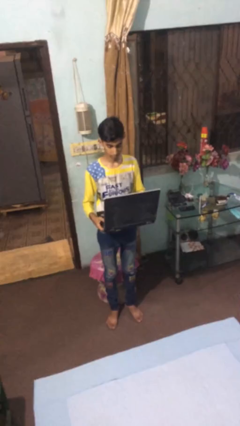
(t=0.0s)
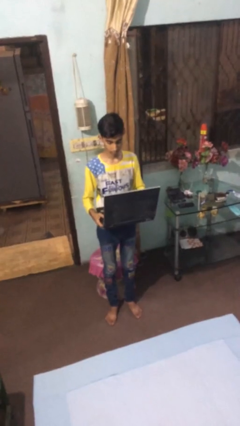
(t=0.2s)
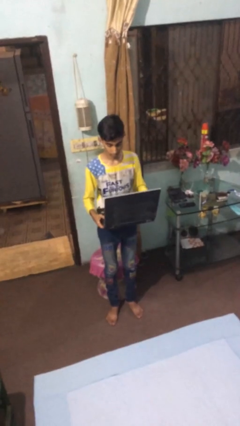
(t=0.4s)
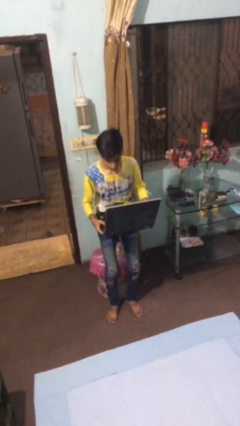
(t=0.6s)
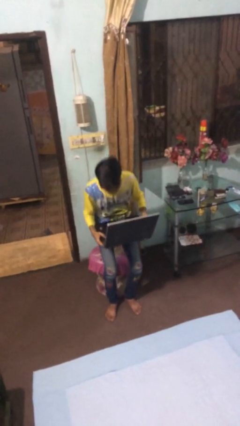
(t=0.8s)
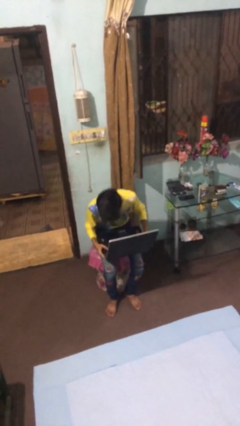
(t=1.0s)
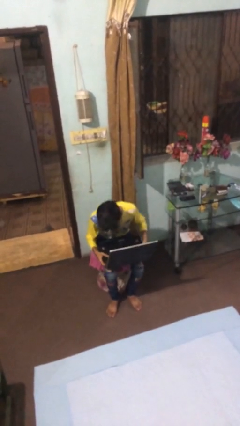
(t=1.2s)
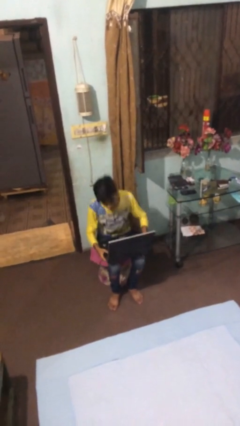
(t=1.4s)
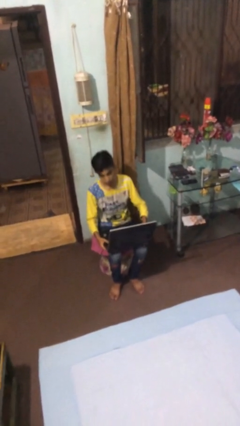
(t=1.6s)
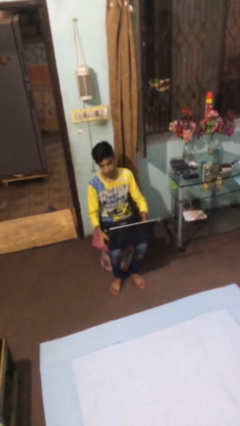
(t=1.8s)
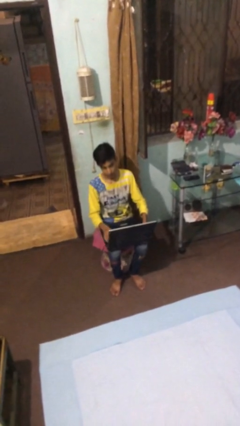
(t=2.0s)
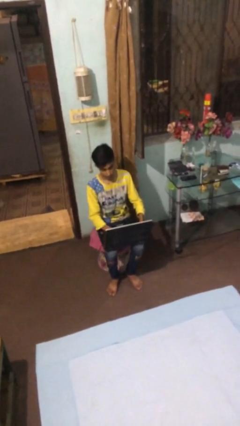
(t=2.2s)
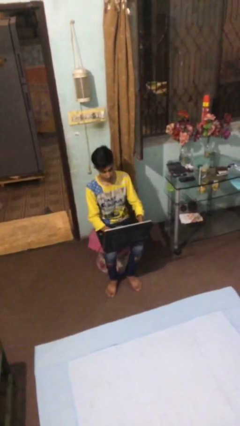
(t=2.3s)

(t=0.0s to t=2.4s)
person sits down

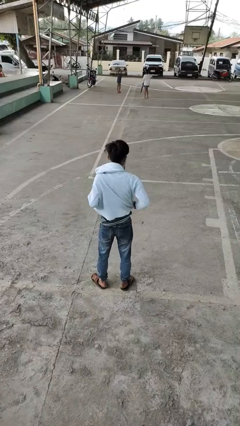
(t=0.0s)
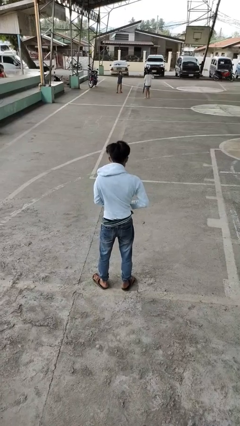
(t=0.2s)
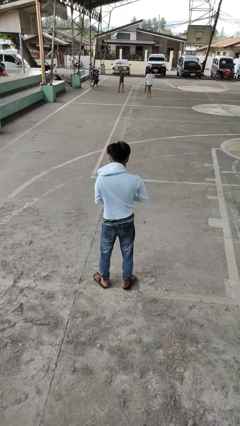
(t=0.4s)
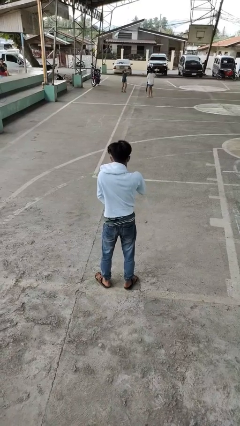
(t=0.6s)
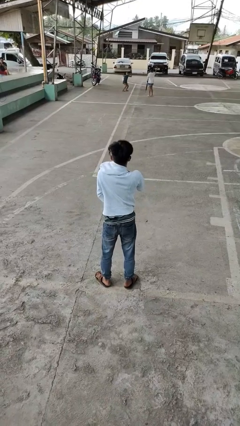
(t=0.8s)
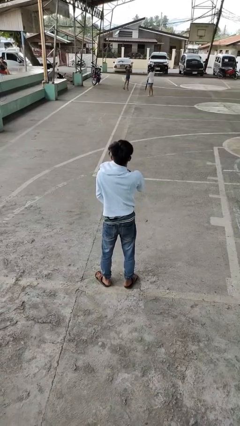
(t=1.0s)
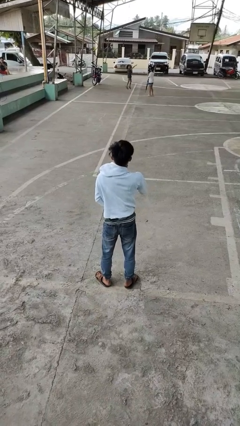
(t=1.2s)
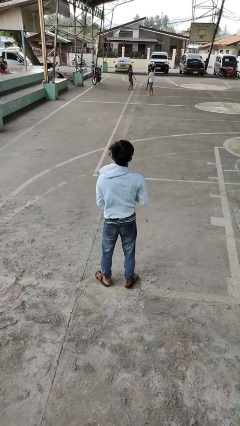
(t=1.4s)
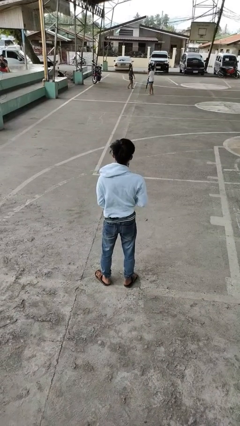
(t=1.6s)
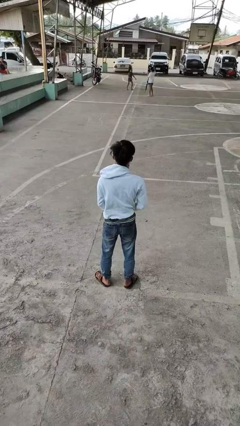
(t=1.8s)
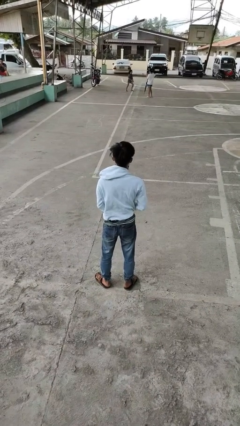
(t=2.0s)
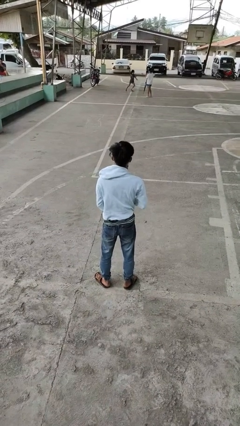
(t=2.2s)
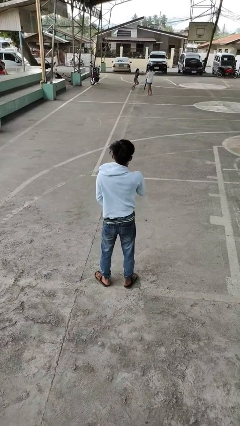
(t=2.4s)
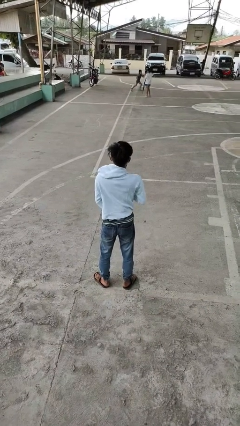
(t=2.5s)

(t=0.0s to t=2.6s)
person zips up jacket

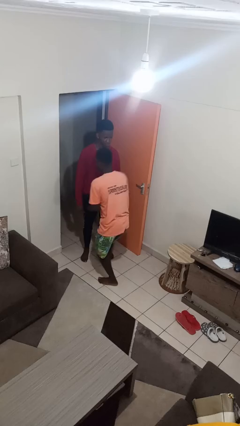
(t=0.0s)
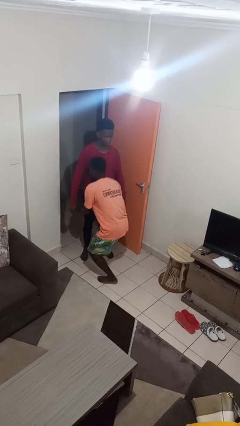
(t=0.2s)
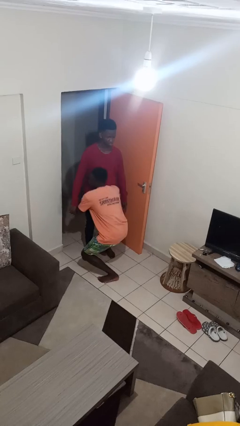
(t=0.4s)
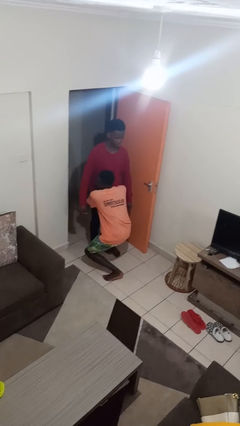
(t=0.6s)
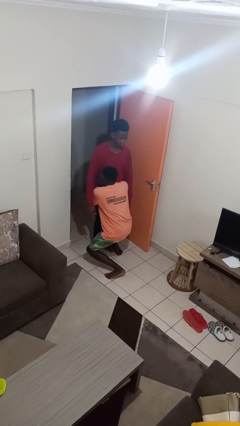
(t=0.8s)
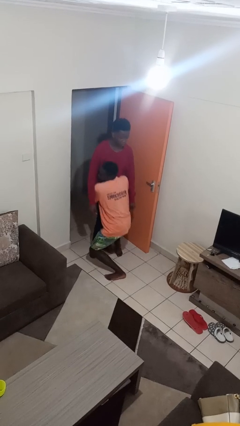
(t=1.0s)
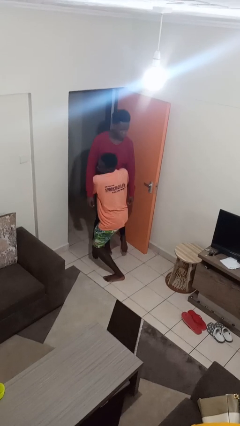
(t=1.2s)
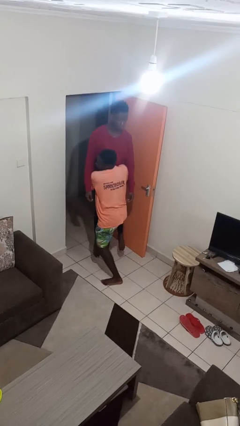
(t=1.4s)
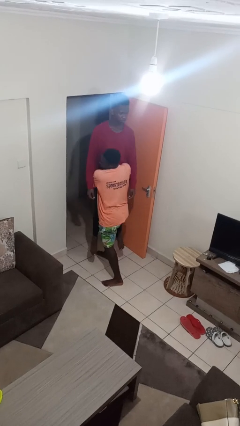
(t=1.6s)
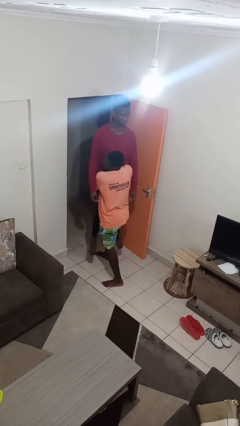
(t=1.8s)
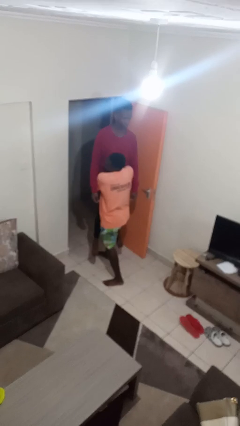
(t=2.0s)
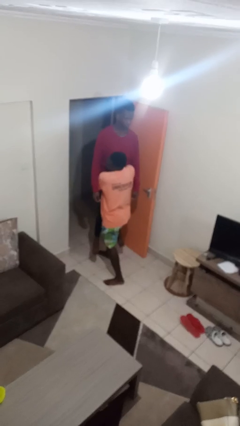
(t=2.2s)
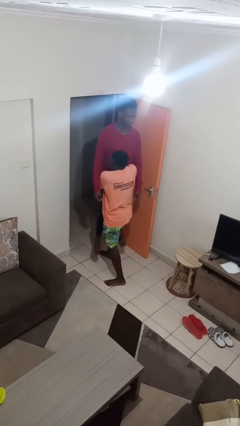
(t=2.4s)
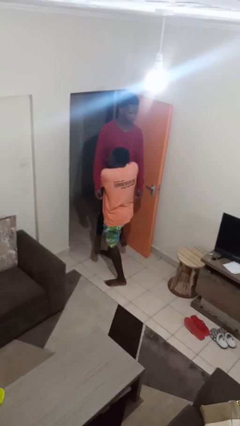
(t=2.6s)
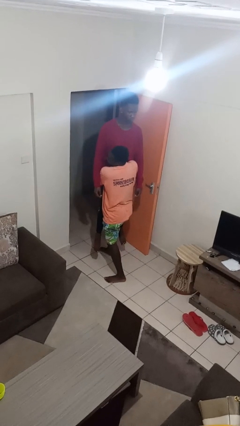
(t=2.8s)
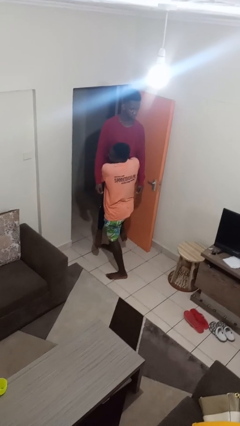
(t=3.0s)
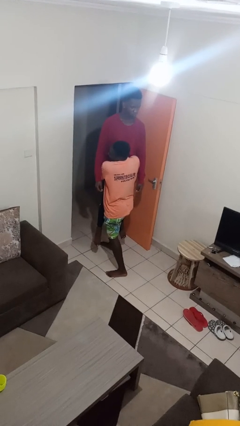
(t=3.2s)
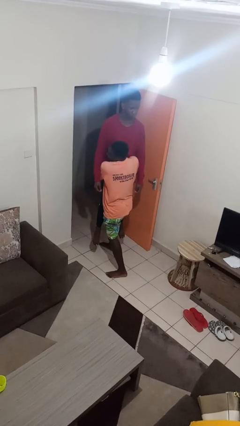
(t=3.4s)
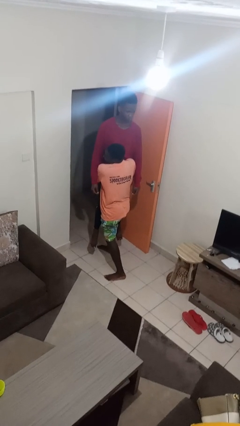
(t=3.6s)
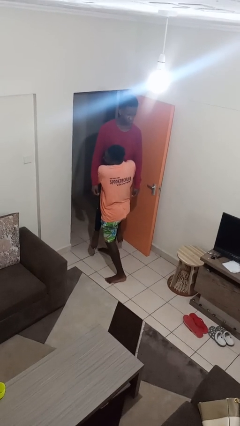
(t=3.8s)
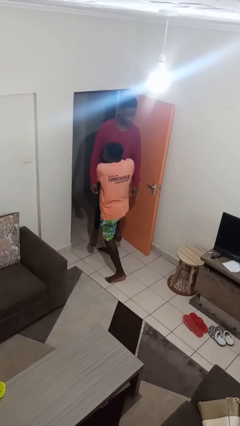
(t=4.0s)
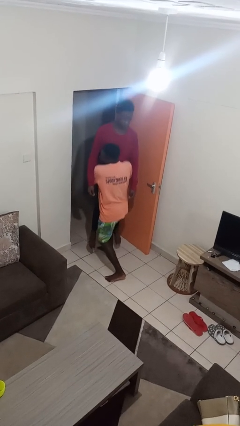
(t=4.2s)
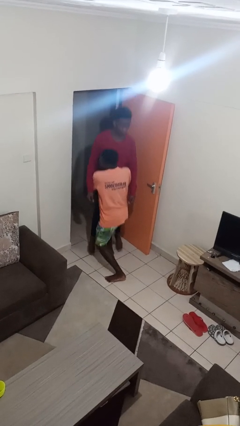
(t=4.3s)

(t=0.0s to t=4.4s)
person picks up person

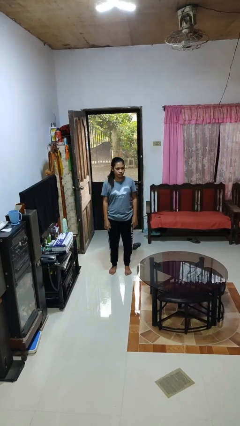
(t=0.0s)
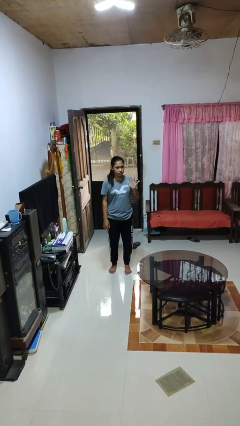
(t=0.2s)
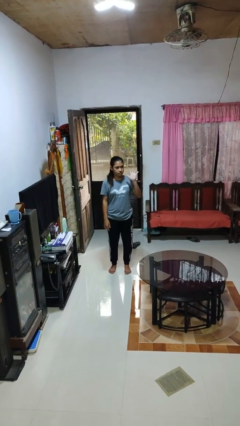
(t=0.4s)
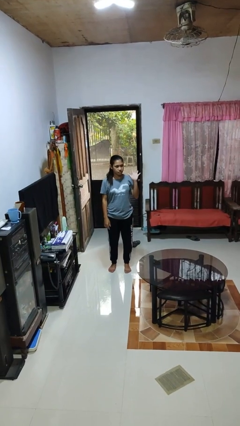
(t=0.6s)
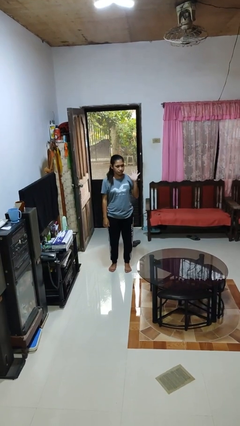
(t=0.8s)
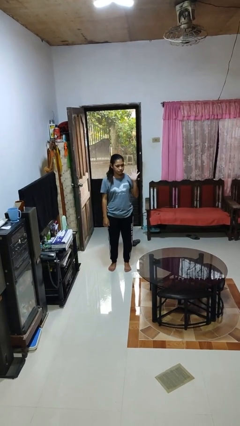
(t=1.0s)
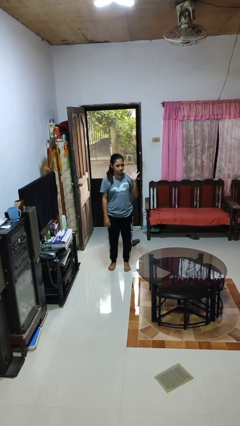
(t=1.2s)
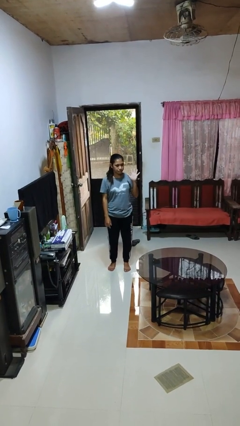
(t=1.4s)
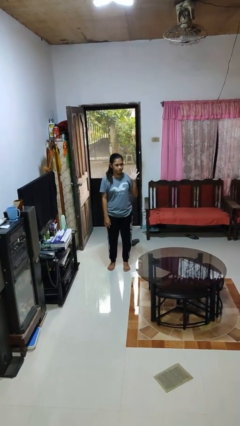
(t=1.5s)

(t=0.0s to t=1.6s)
person gestures number five

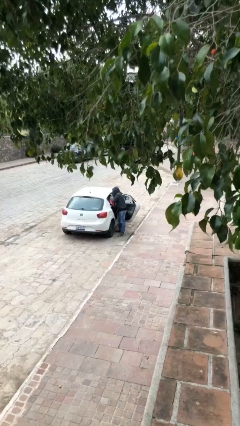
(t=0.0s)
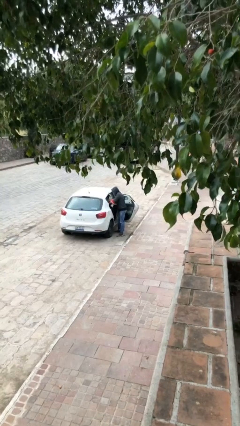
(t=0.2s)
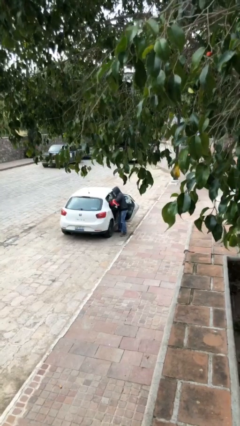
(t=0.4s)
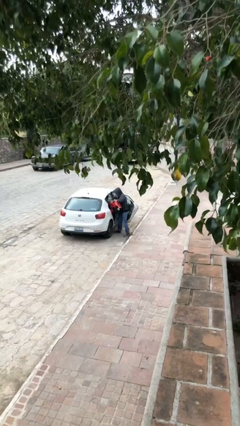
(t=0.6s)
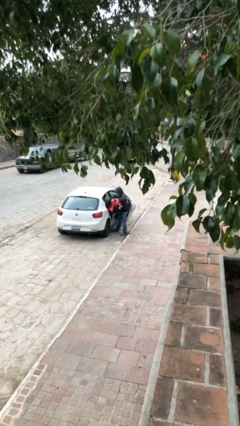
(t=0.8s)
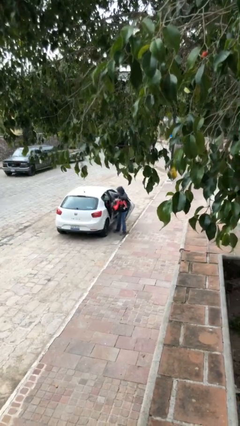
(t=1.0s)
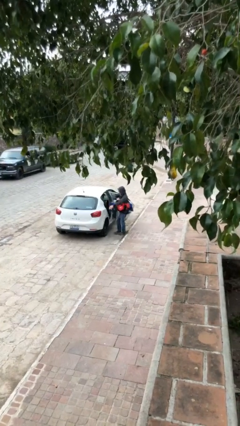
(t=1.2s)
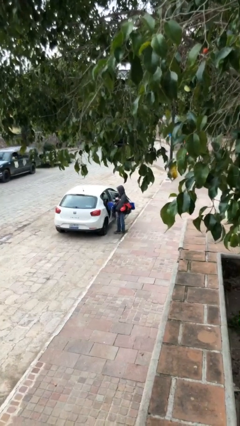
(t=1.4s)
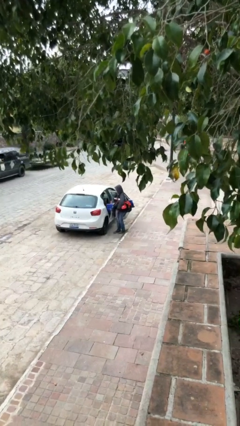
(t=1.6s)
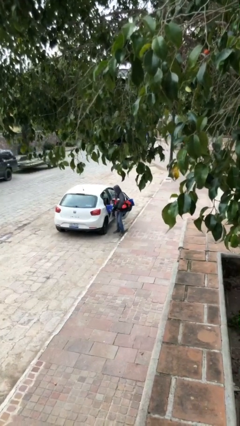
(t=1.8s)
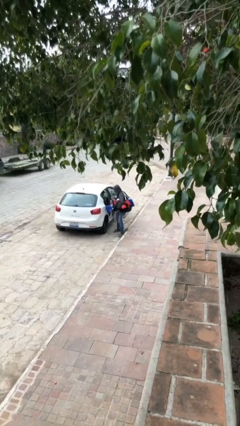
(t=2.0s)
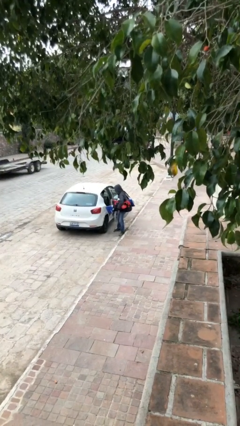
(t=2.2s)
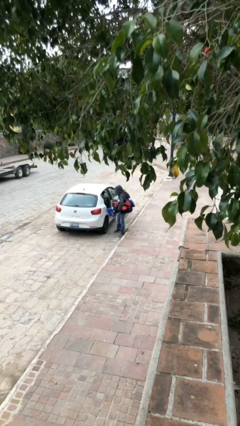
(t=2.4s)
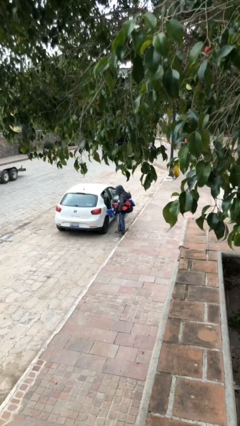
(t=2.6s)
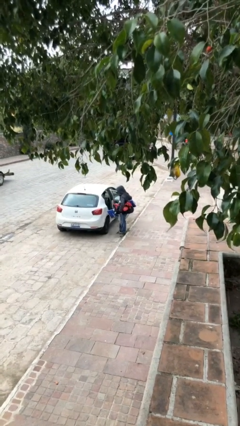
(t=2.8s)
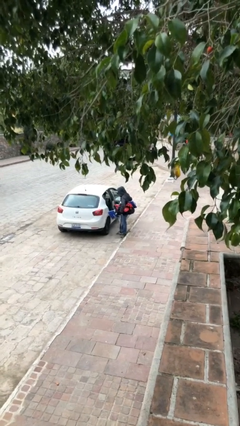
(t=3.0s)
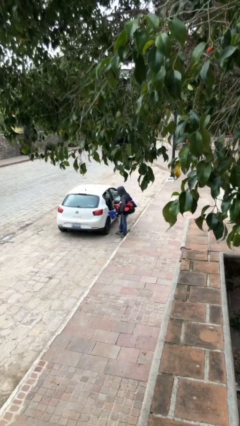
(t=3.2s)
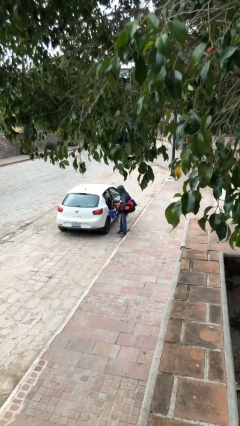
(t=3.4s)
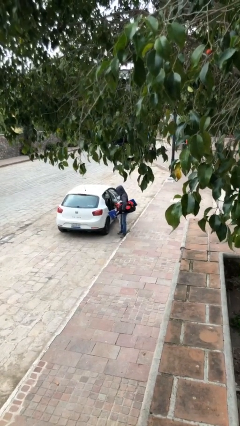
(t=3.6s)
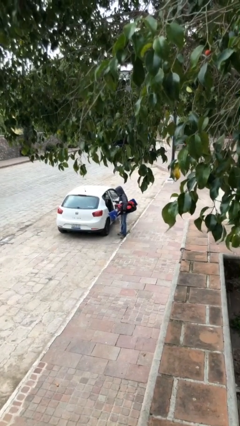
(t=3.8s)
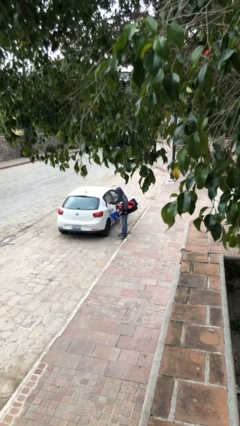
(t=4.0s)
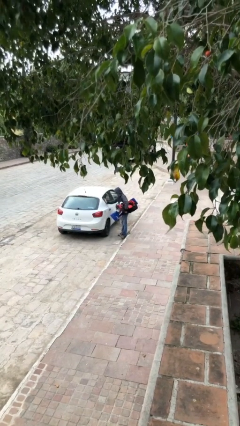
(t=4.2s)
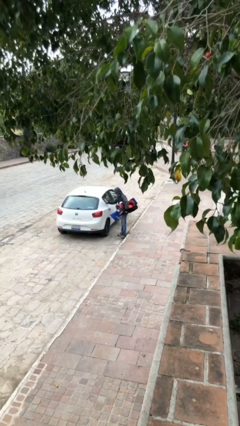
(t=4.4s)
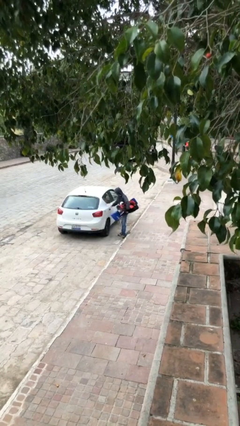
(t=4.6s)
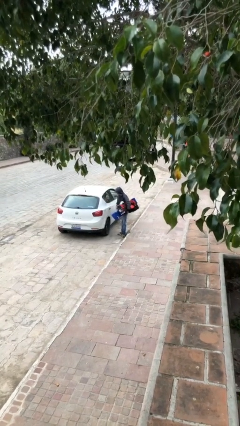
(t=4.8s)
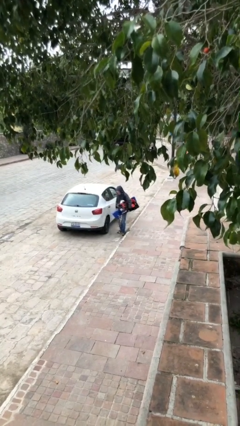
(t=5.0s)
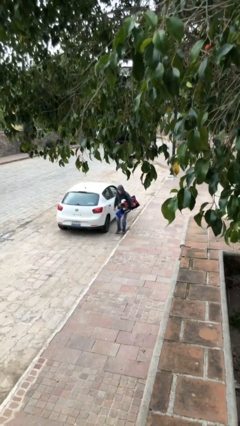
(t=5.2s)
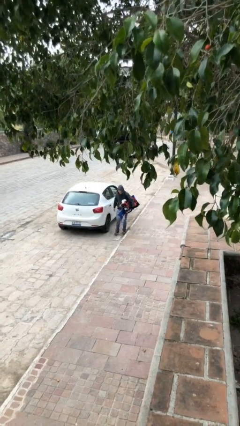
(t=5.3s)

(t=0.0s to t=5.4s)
person closes car door

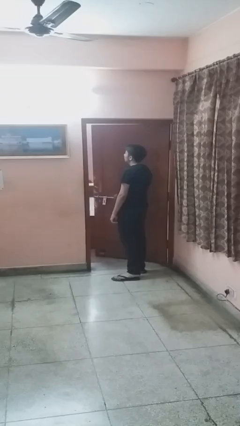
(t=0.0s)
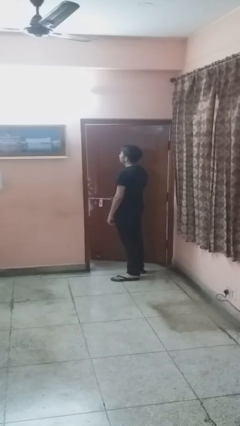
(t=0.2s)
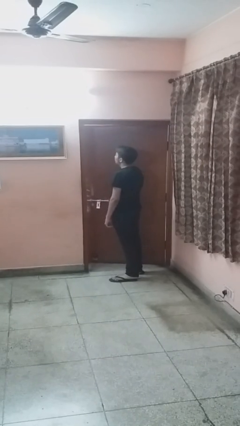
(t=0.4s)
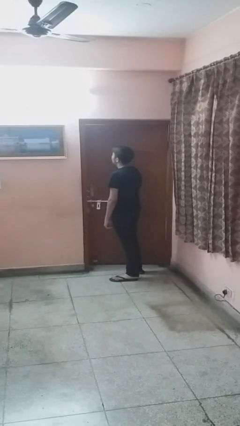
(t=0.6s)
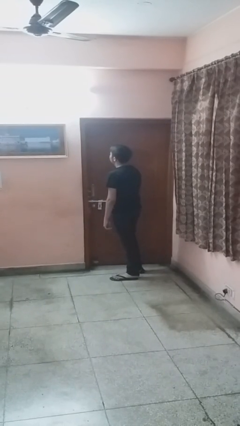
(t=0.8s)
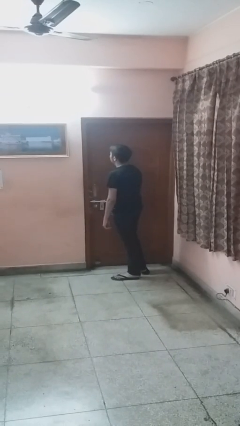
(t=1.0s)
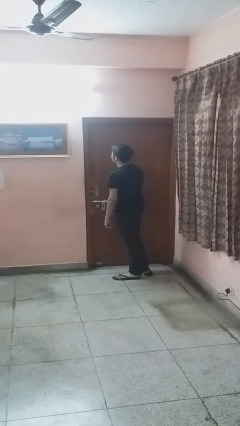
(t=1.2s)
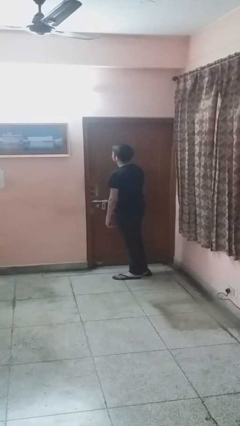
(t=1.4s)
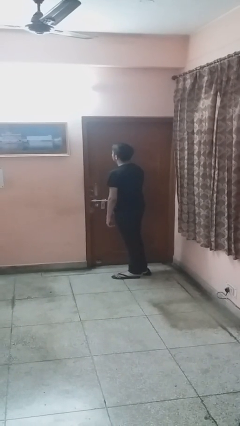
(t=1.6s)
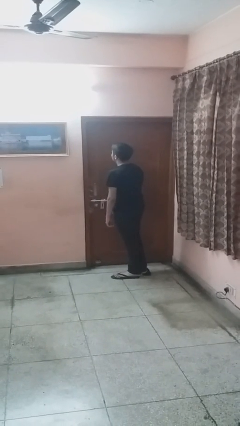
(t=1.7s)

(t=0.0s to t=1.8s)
person closes facility door
